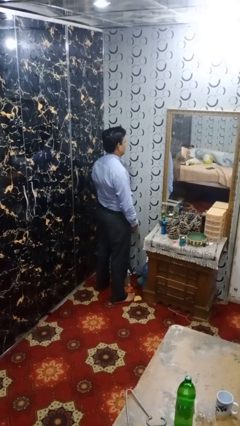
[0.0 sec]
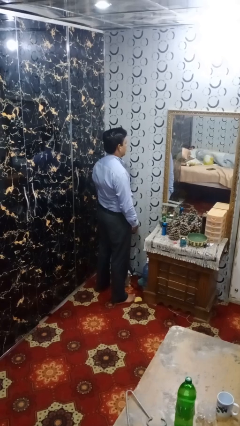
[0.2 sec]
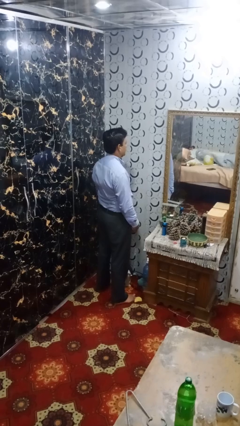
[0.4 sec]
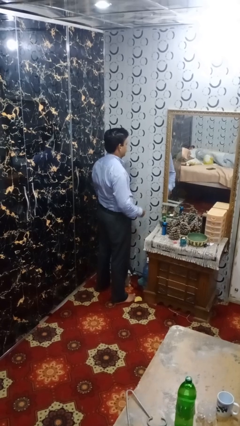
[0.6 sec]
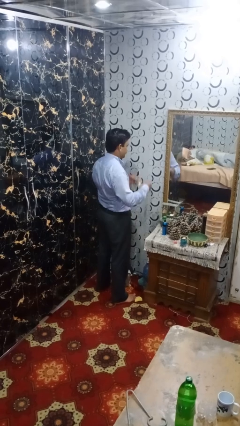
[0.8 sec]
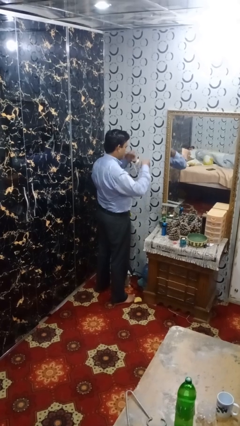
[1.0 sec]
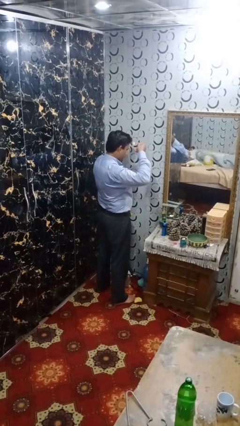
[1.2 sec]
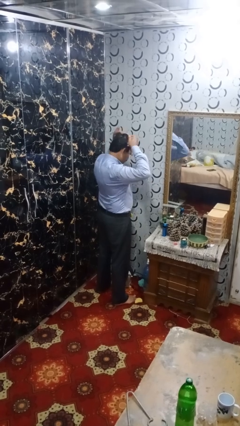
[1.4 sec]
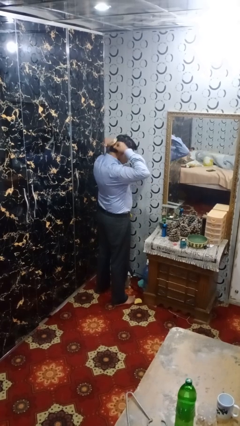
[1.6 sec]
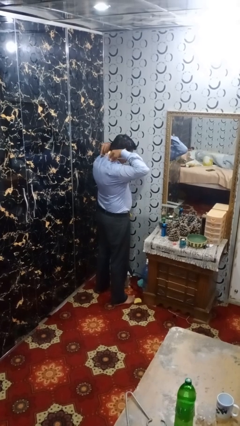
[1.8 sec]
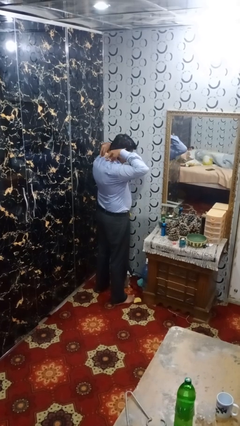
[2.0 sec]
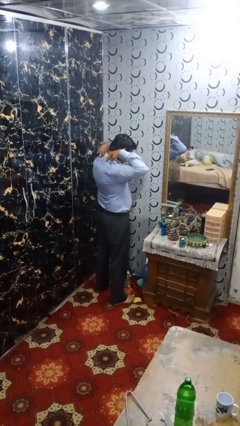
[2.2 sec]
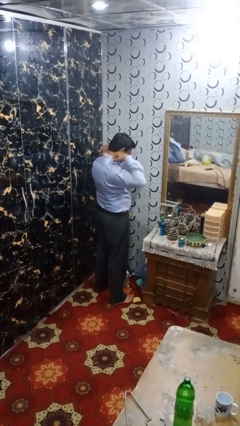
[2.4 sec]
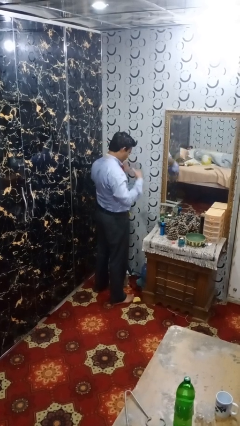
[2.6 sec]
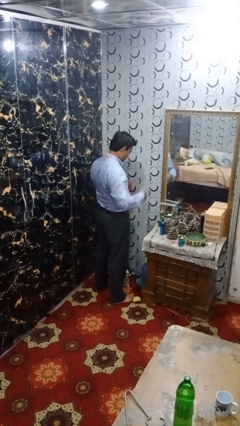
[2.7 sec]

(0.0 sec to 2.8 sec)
person puts on necklace

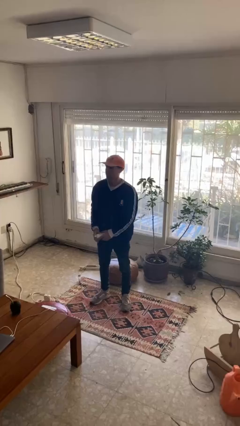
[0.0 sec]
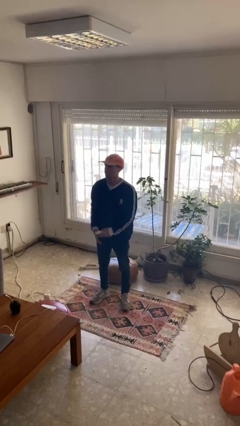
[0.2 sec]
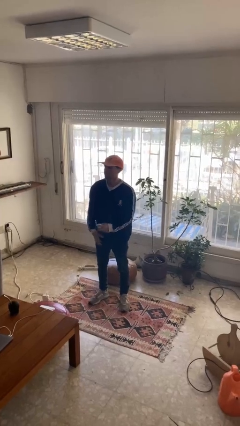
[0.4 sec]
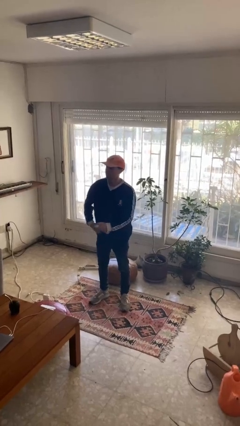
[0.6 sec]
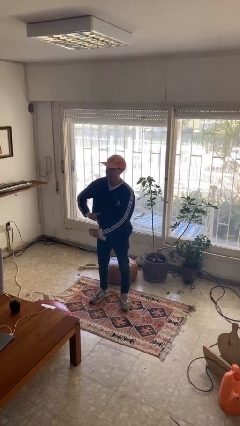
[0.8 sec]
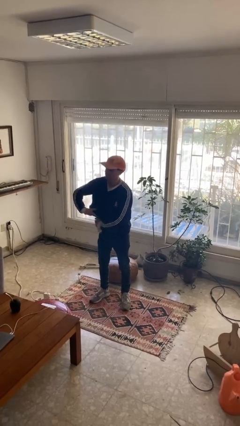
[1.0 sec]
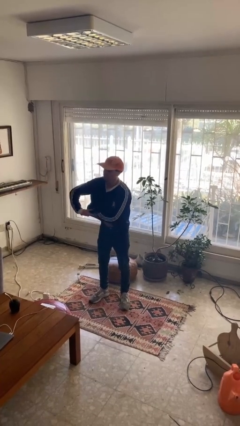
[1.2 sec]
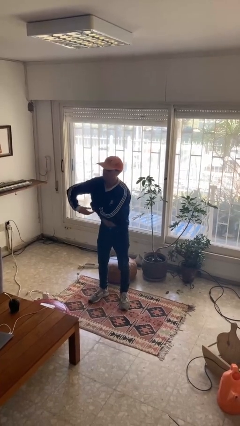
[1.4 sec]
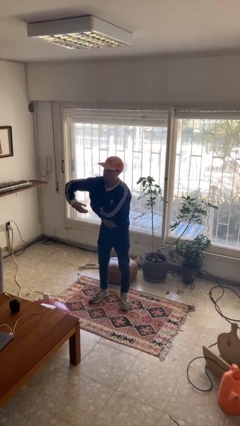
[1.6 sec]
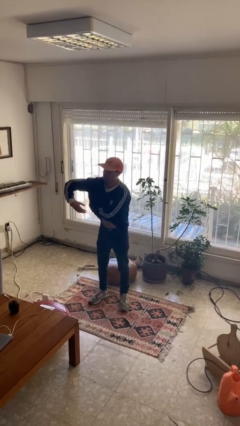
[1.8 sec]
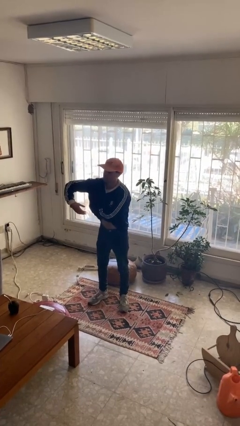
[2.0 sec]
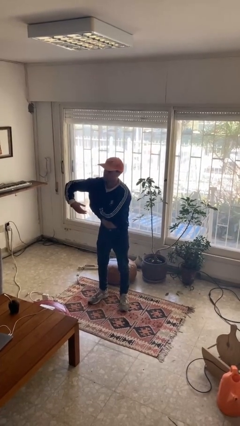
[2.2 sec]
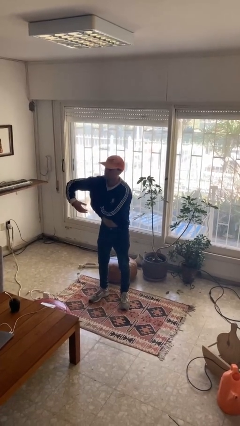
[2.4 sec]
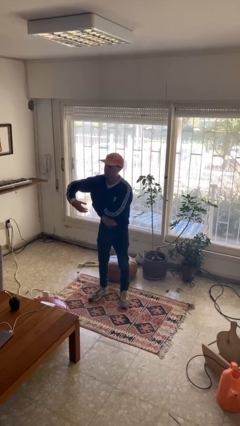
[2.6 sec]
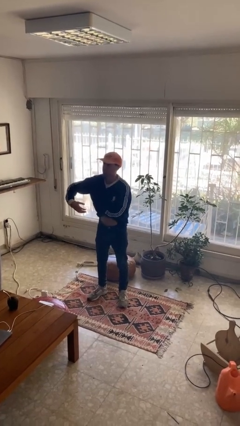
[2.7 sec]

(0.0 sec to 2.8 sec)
person applies deodorant

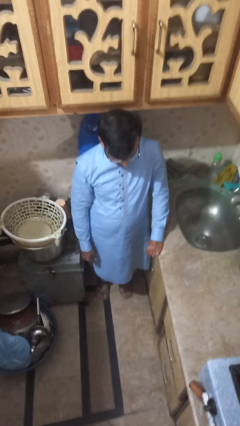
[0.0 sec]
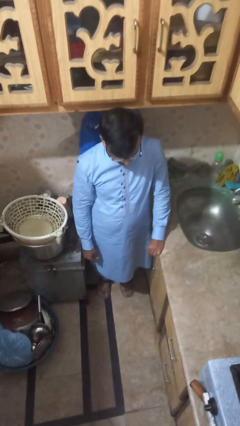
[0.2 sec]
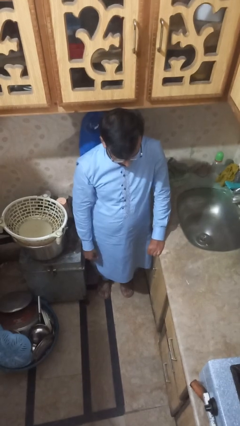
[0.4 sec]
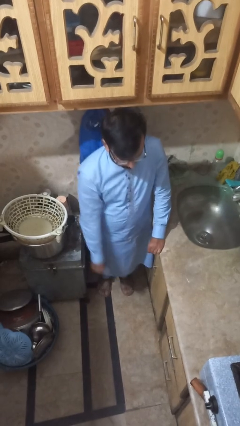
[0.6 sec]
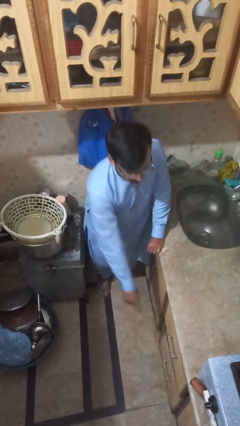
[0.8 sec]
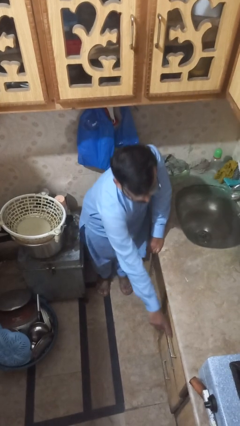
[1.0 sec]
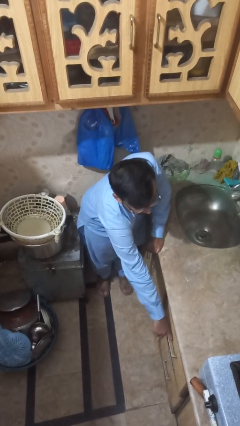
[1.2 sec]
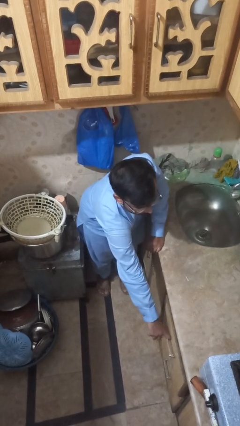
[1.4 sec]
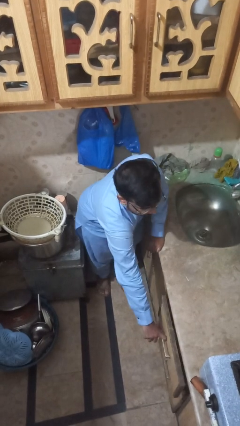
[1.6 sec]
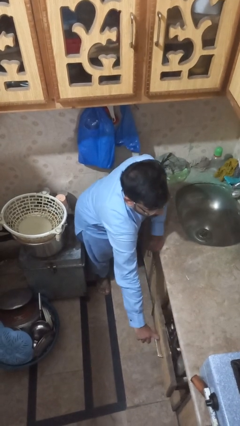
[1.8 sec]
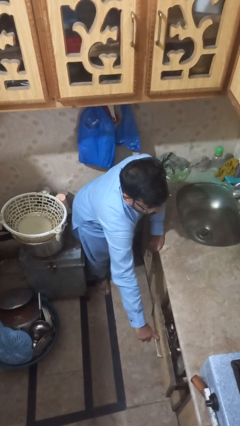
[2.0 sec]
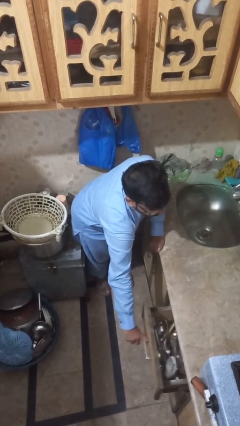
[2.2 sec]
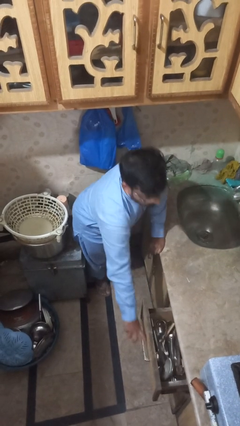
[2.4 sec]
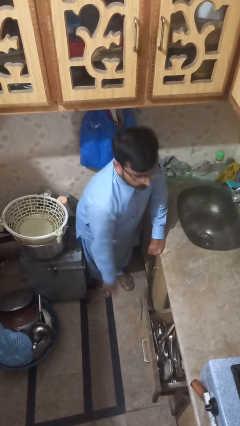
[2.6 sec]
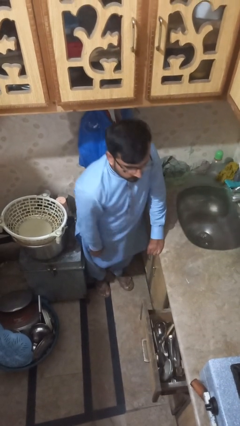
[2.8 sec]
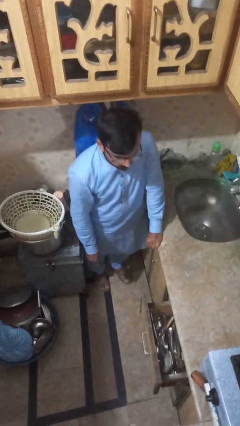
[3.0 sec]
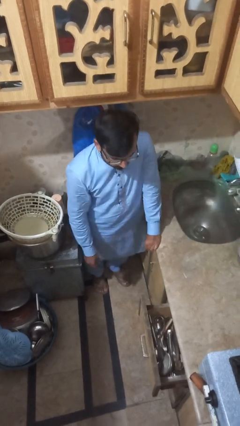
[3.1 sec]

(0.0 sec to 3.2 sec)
person opens kitchen drawer

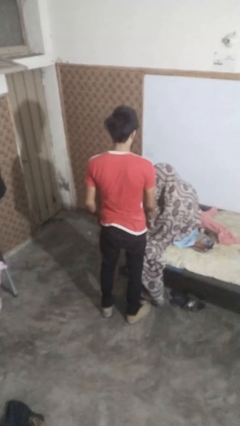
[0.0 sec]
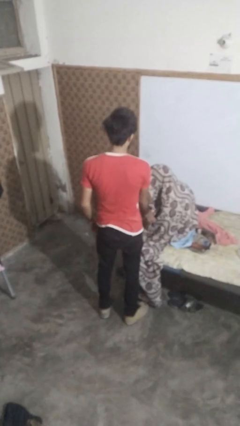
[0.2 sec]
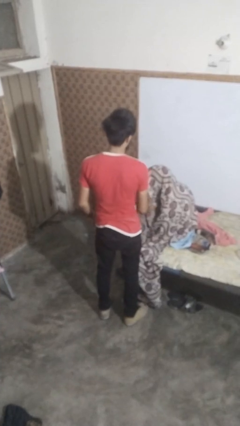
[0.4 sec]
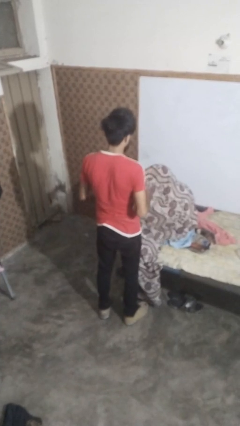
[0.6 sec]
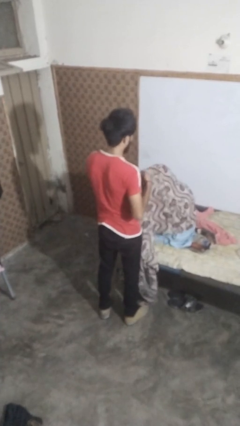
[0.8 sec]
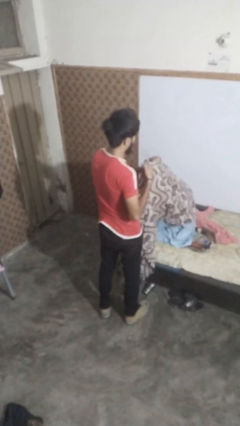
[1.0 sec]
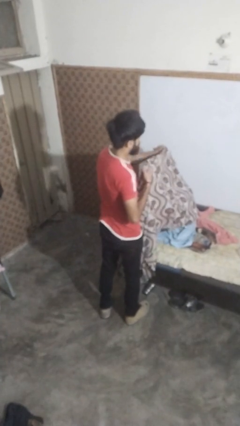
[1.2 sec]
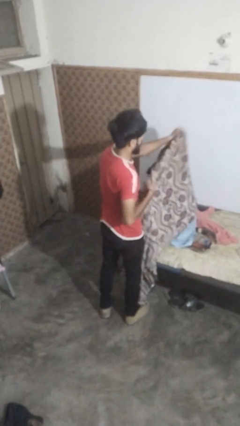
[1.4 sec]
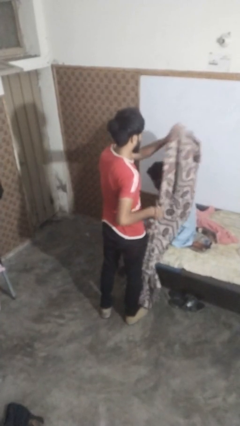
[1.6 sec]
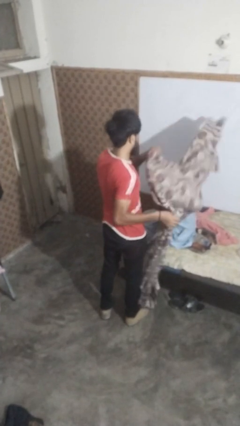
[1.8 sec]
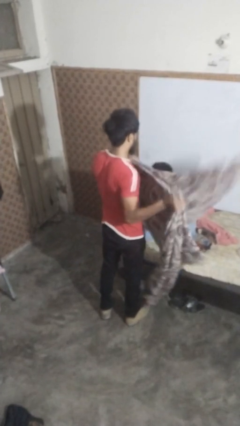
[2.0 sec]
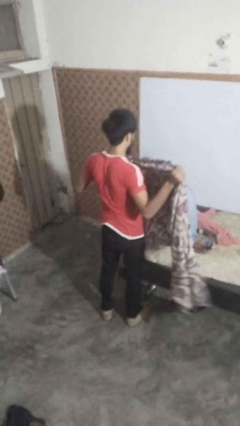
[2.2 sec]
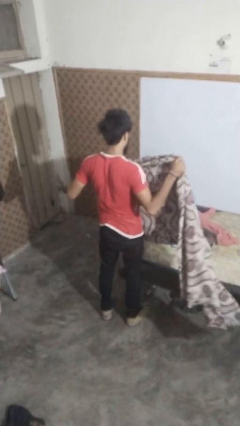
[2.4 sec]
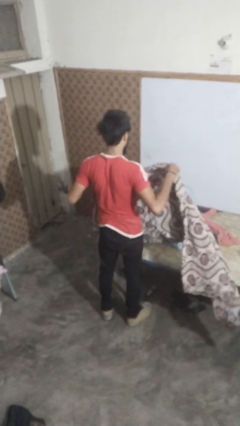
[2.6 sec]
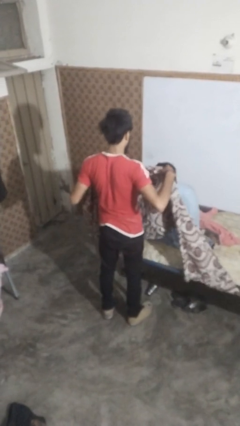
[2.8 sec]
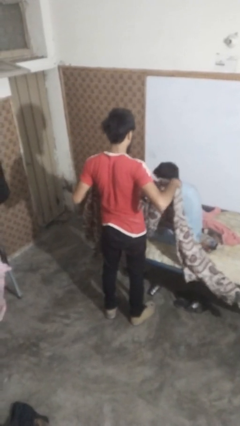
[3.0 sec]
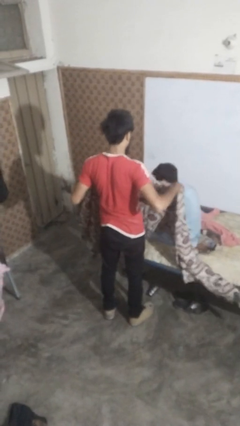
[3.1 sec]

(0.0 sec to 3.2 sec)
person uncovers friend with blanket

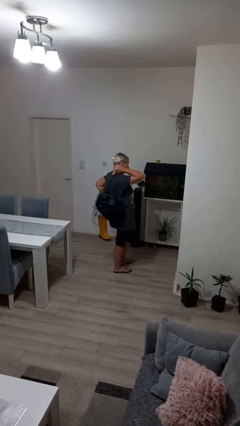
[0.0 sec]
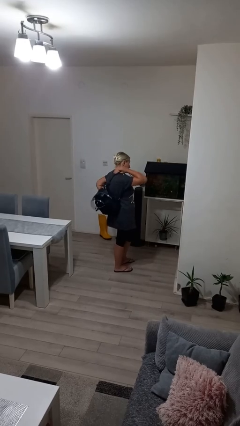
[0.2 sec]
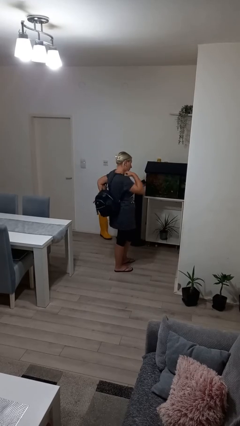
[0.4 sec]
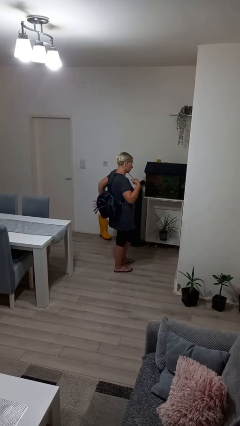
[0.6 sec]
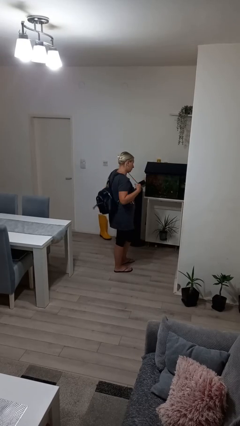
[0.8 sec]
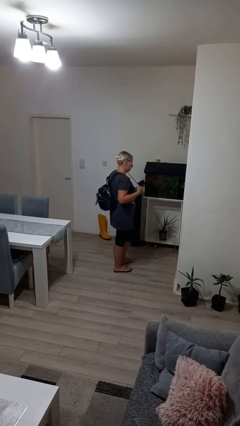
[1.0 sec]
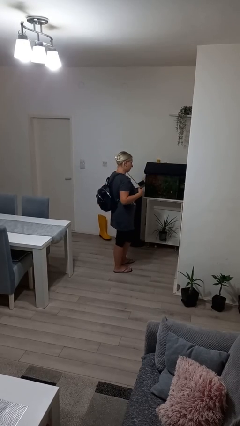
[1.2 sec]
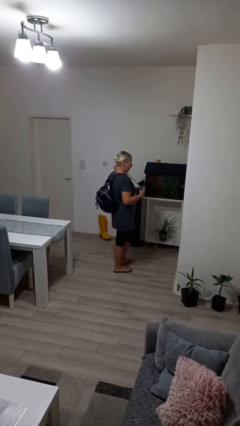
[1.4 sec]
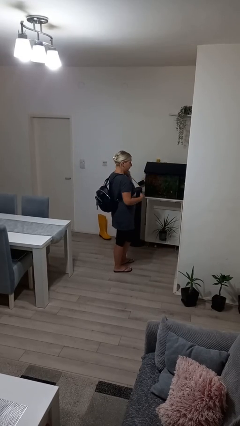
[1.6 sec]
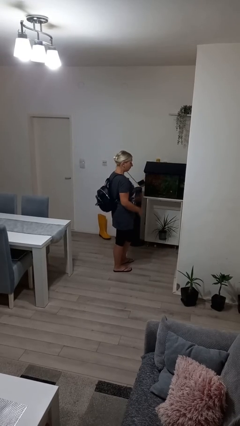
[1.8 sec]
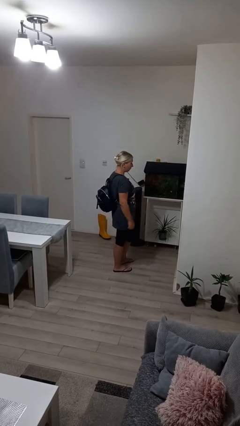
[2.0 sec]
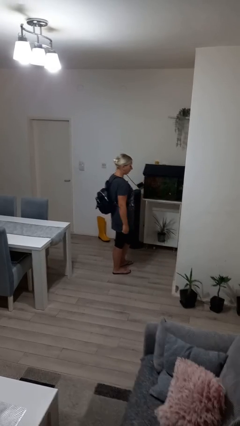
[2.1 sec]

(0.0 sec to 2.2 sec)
person puts on backpack

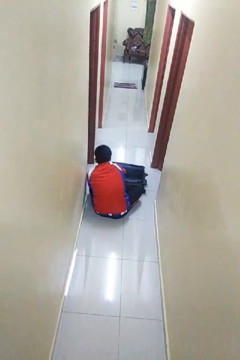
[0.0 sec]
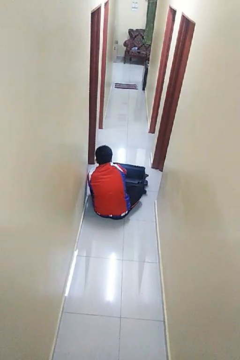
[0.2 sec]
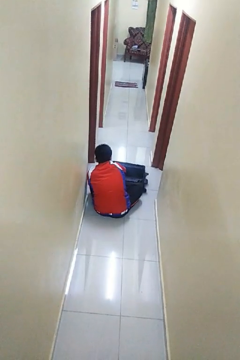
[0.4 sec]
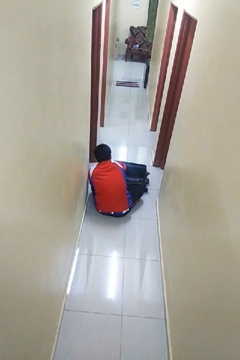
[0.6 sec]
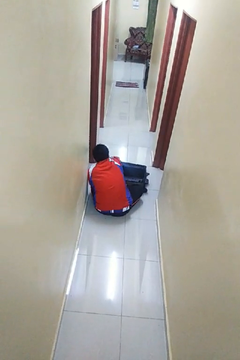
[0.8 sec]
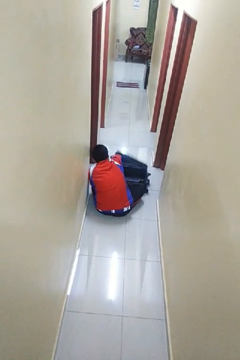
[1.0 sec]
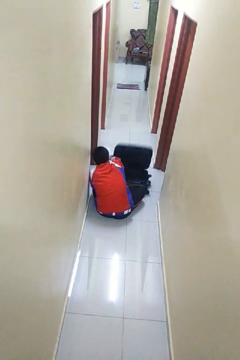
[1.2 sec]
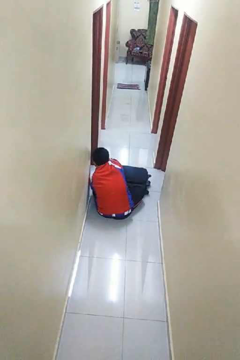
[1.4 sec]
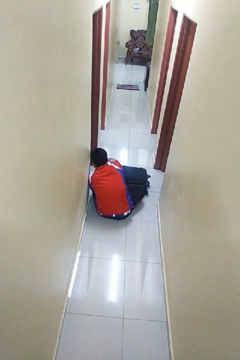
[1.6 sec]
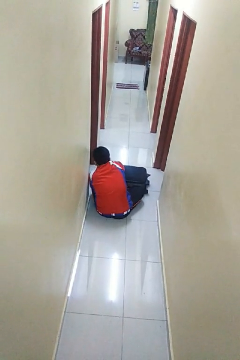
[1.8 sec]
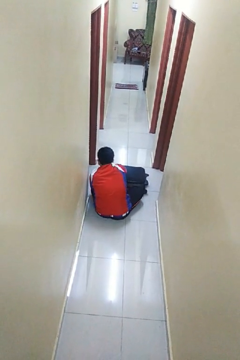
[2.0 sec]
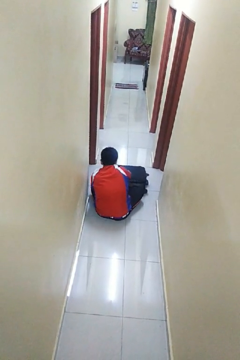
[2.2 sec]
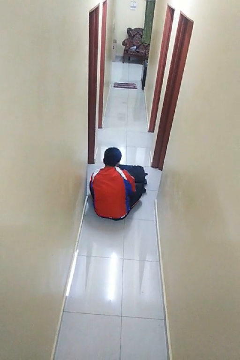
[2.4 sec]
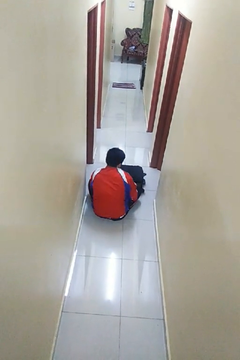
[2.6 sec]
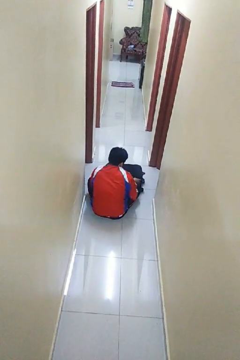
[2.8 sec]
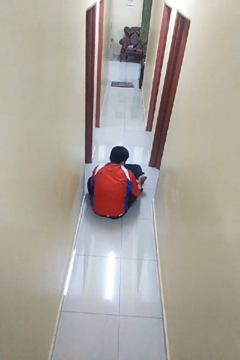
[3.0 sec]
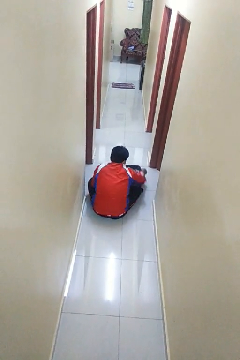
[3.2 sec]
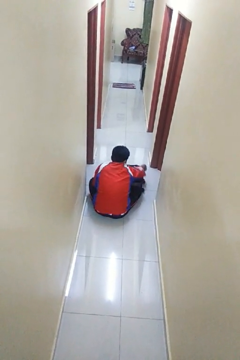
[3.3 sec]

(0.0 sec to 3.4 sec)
person closes suitcase

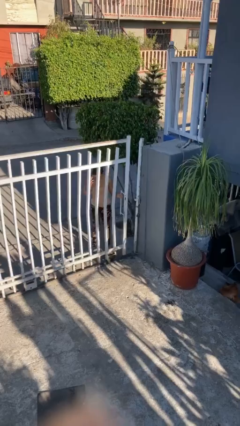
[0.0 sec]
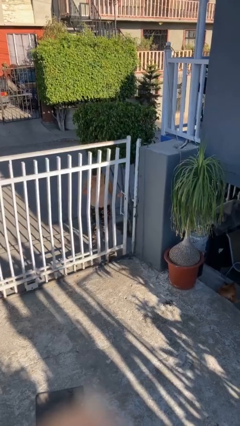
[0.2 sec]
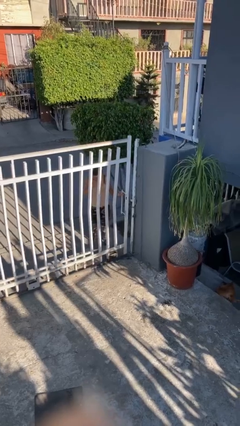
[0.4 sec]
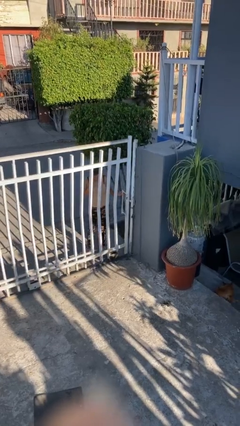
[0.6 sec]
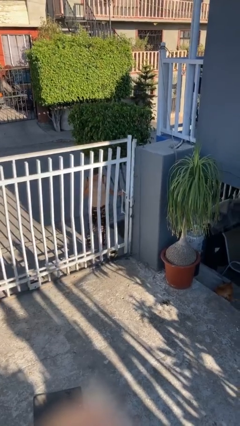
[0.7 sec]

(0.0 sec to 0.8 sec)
person closes facility door
